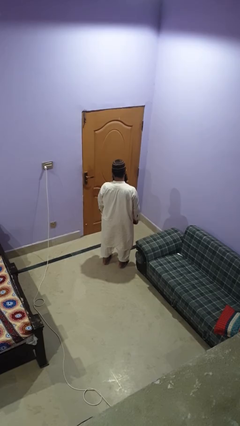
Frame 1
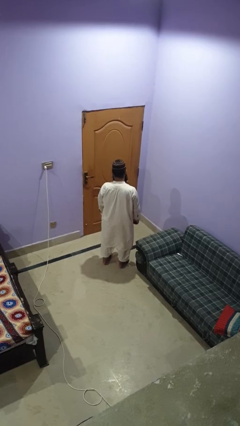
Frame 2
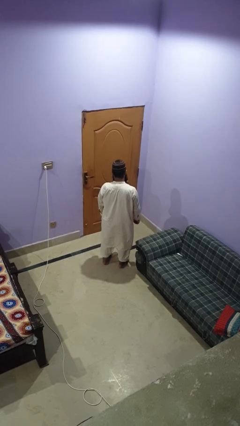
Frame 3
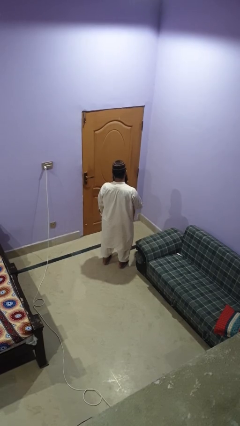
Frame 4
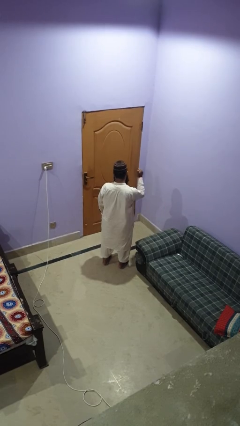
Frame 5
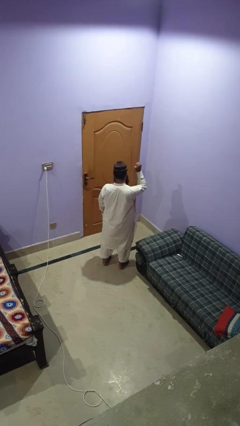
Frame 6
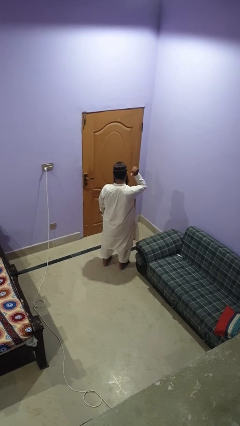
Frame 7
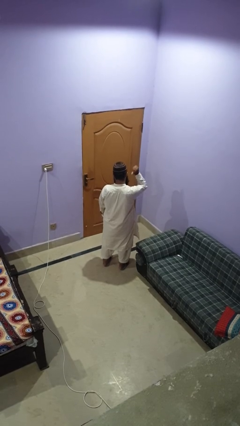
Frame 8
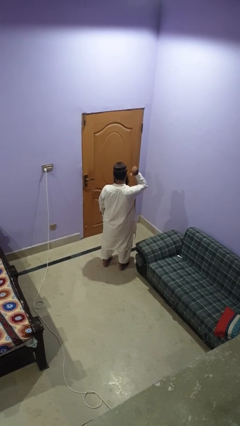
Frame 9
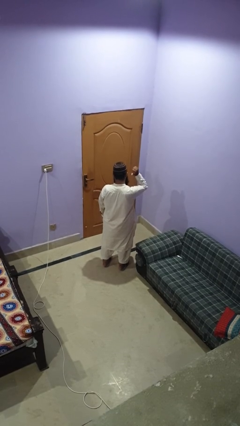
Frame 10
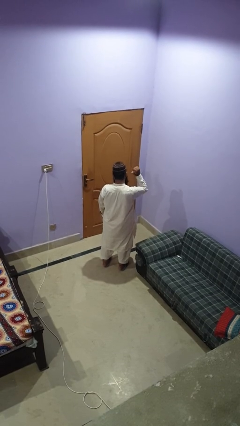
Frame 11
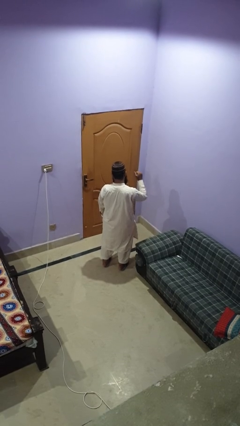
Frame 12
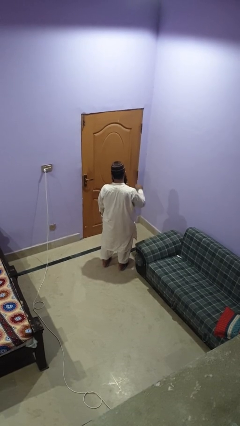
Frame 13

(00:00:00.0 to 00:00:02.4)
person gestures behind me

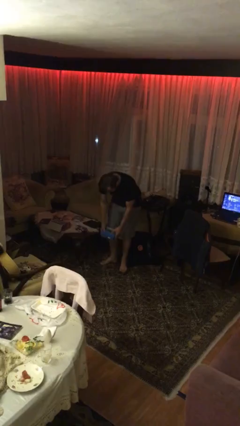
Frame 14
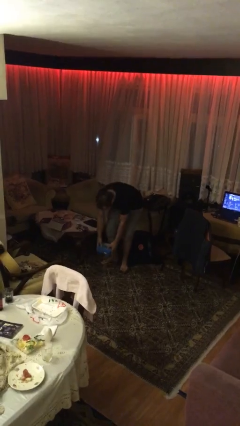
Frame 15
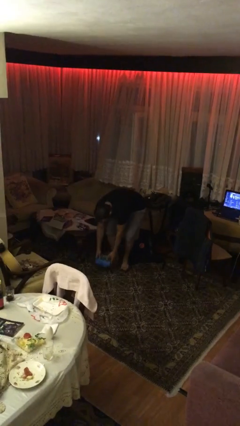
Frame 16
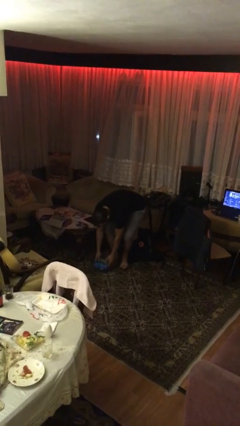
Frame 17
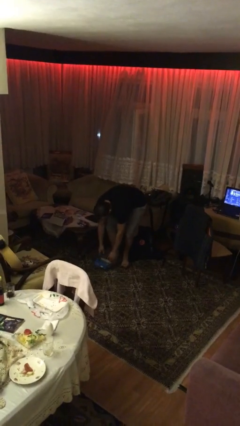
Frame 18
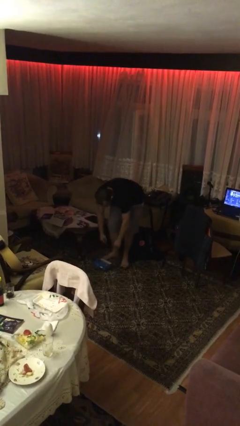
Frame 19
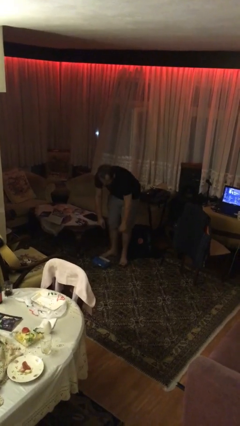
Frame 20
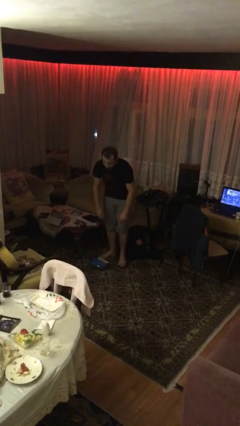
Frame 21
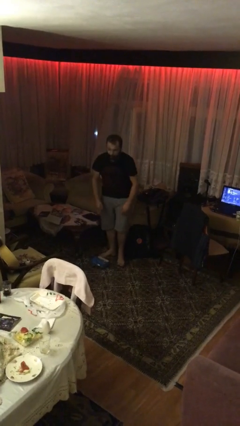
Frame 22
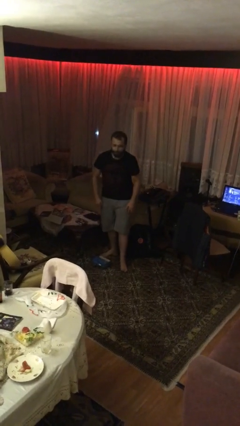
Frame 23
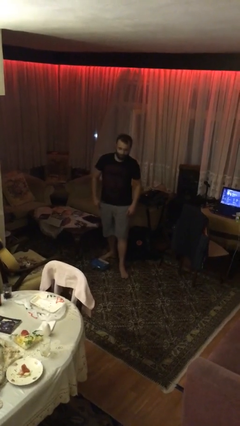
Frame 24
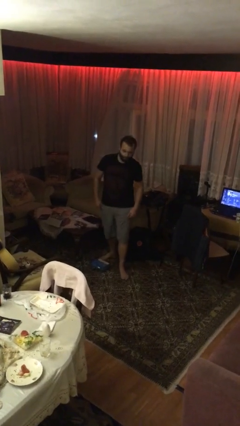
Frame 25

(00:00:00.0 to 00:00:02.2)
person puts down object on floor

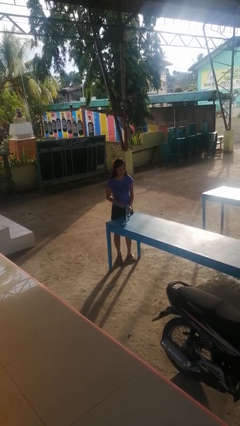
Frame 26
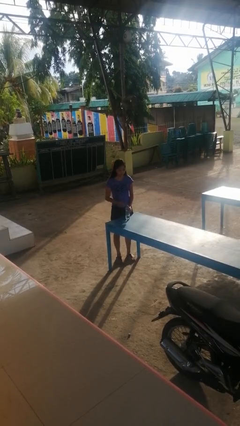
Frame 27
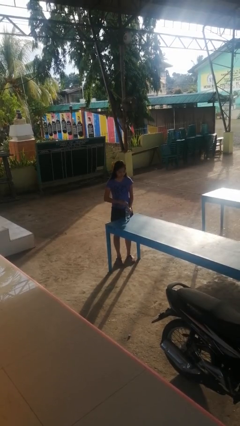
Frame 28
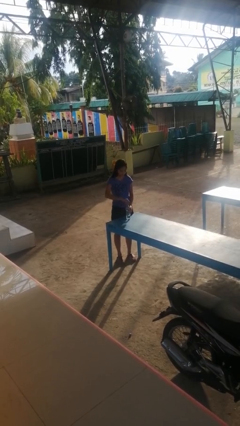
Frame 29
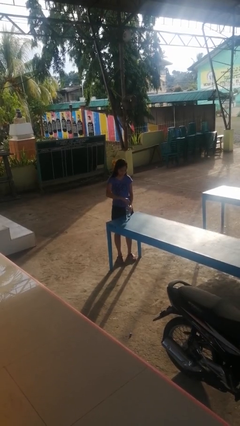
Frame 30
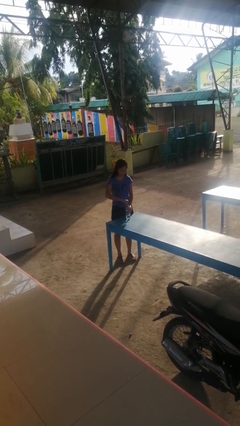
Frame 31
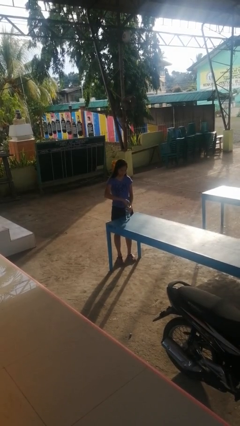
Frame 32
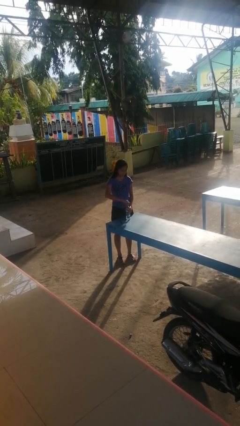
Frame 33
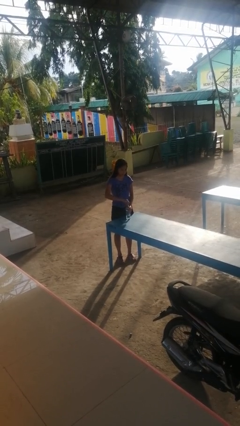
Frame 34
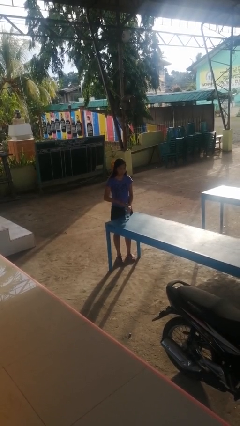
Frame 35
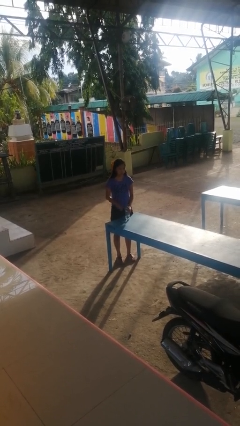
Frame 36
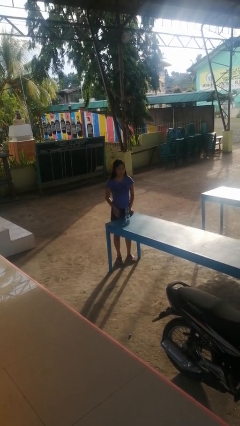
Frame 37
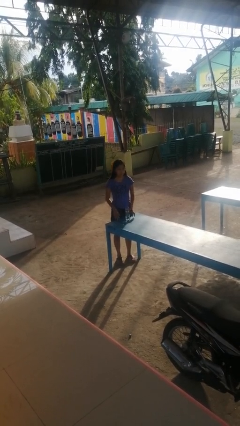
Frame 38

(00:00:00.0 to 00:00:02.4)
person screws lid to bottle

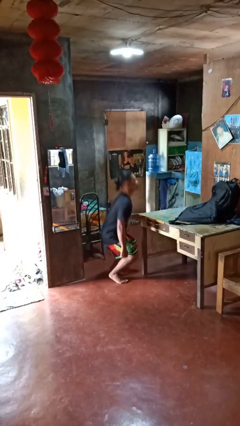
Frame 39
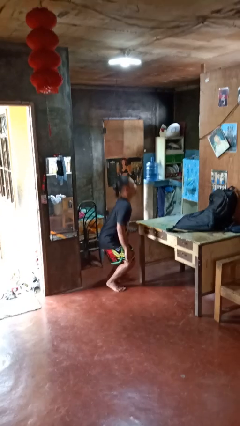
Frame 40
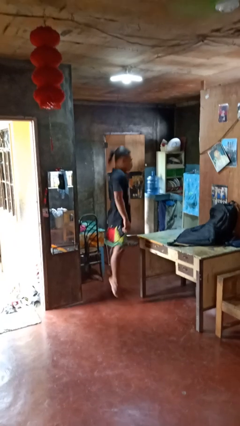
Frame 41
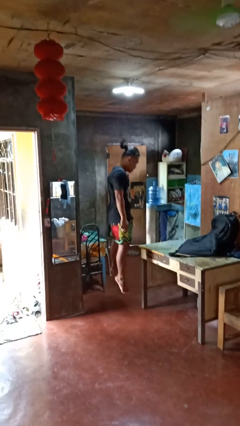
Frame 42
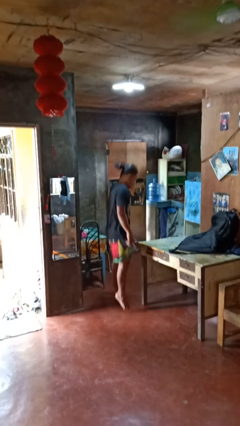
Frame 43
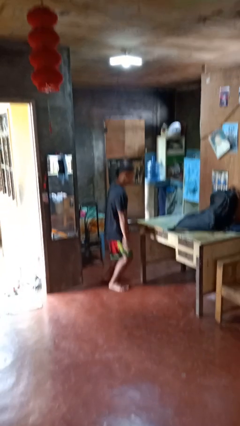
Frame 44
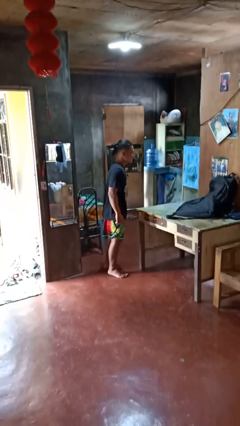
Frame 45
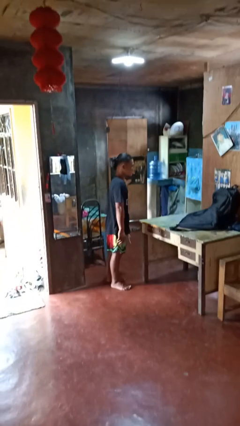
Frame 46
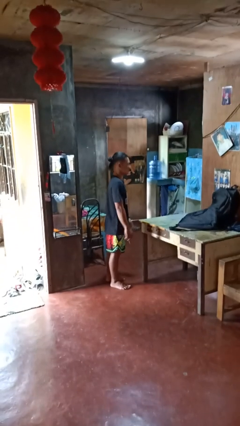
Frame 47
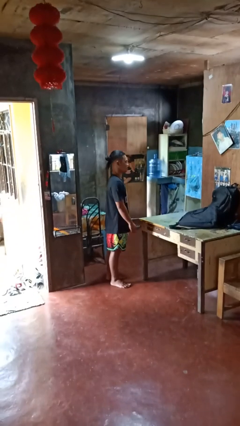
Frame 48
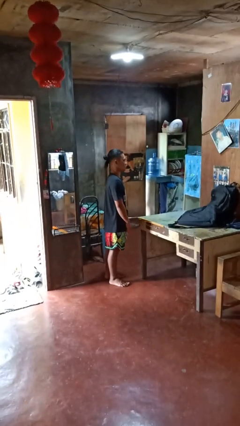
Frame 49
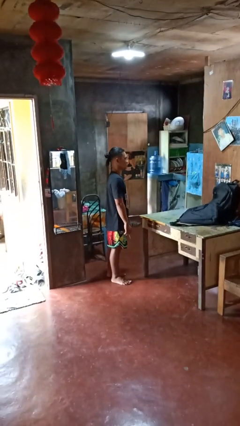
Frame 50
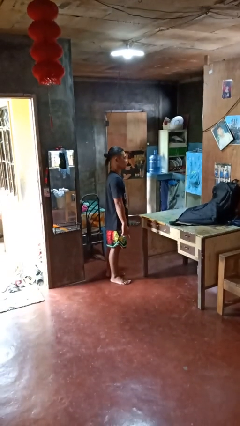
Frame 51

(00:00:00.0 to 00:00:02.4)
person jumps

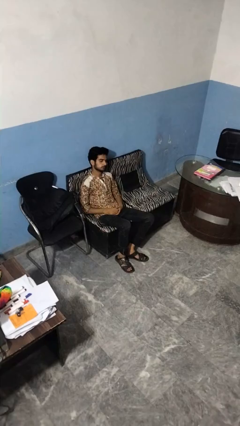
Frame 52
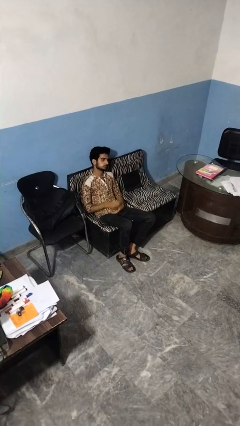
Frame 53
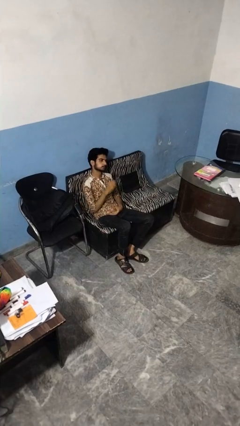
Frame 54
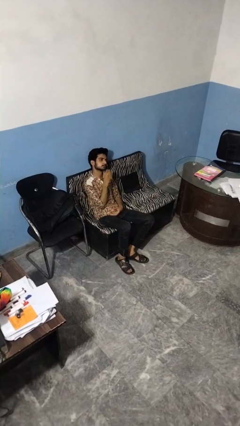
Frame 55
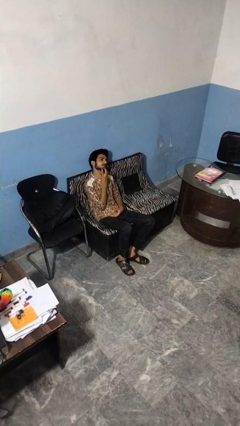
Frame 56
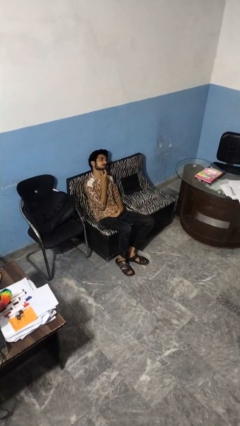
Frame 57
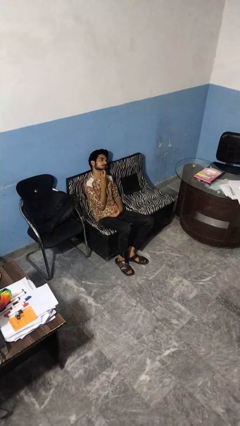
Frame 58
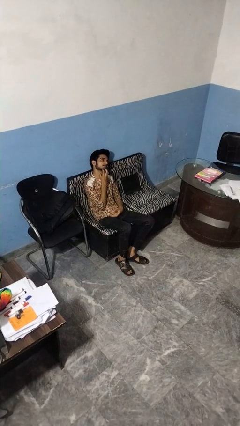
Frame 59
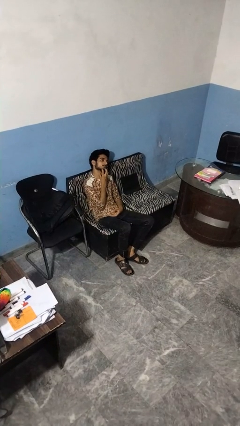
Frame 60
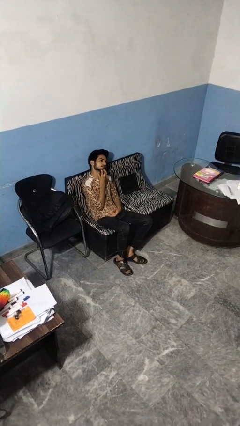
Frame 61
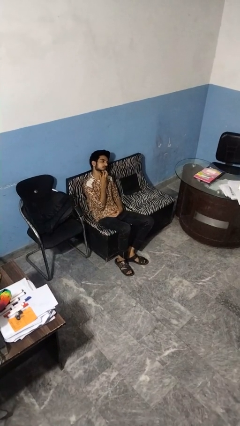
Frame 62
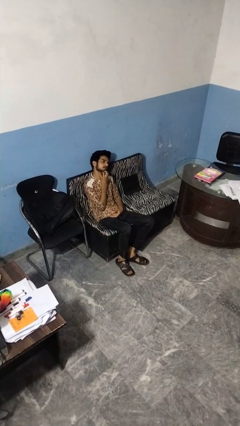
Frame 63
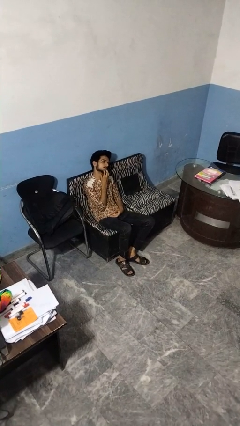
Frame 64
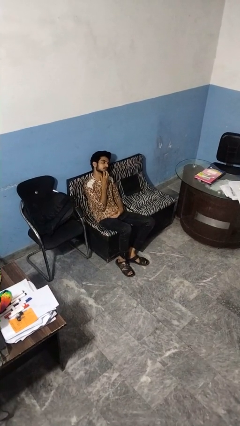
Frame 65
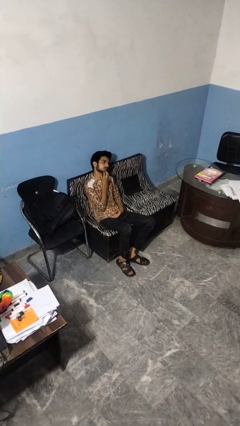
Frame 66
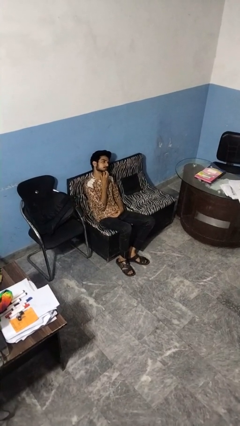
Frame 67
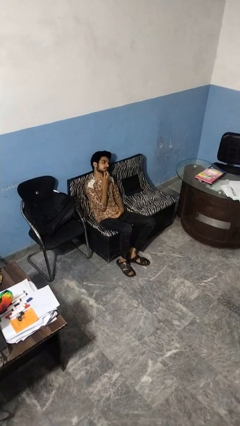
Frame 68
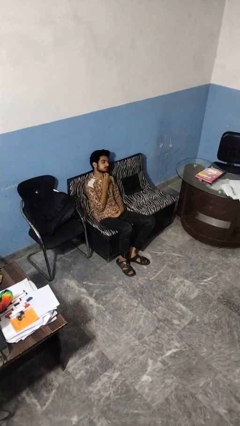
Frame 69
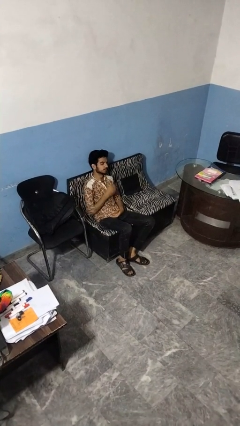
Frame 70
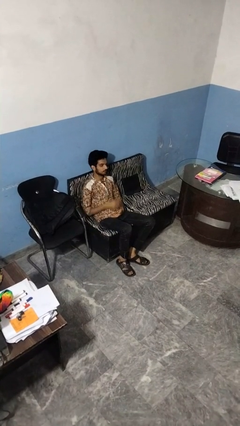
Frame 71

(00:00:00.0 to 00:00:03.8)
person strokes chin

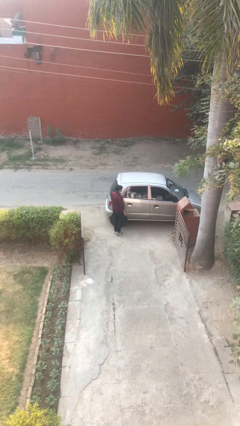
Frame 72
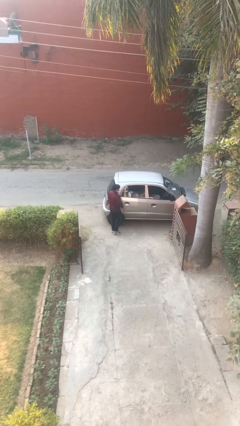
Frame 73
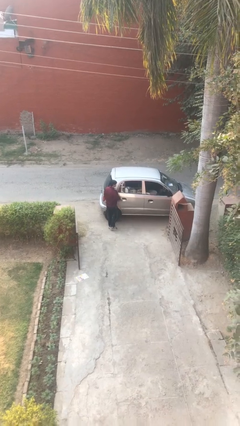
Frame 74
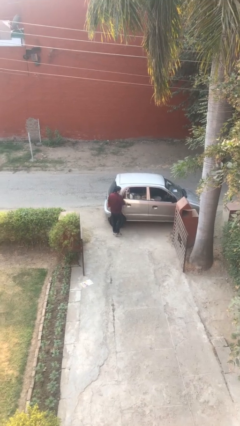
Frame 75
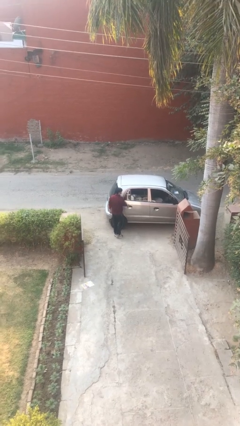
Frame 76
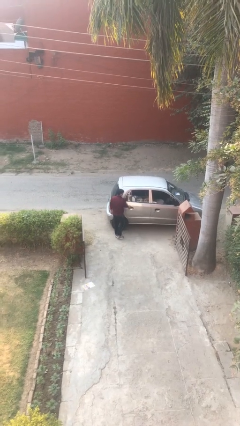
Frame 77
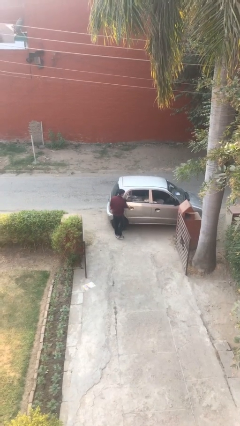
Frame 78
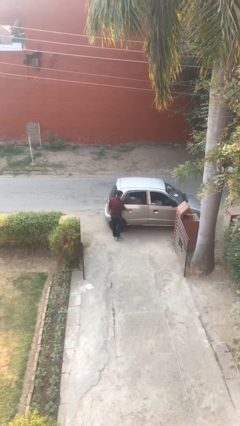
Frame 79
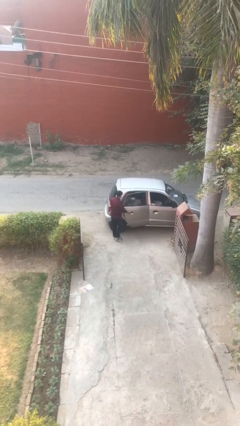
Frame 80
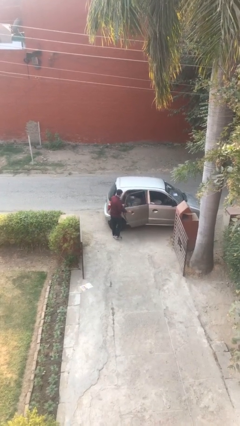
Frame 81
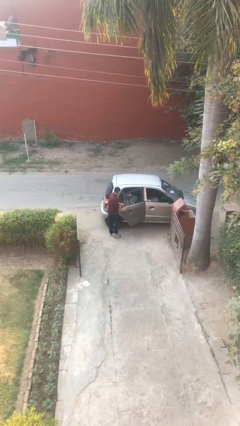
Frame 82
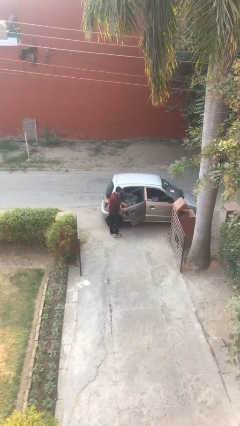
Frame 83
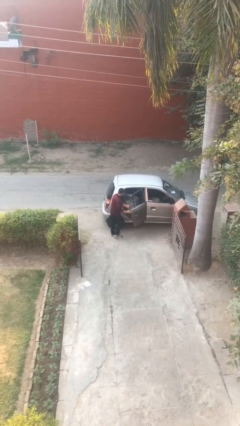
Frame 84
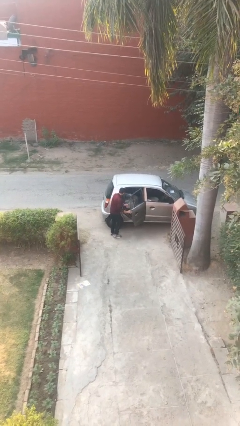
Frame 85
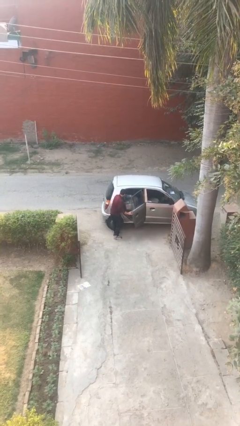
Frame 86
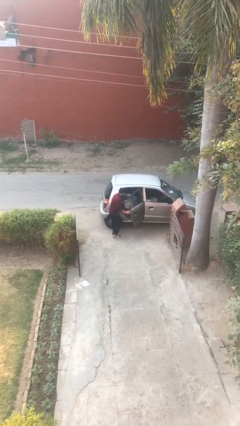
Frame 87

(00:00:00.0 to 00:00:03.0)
person opens car door

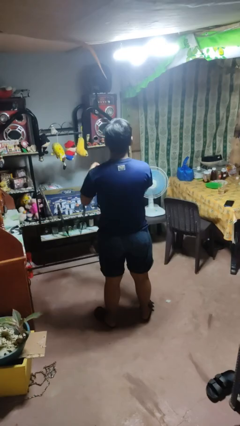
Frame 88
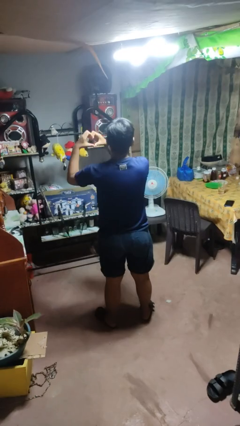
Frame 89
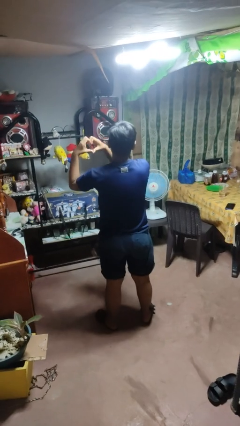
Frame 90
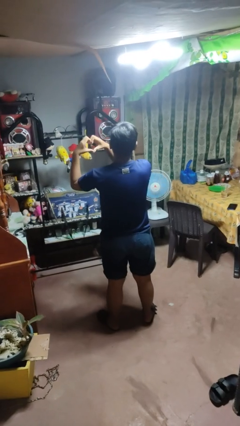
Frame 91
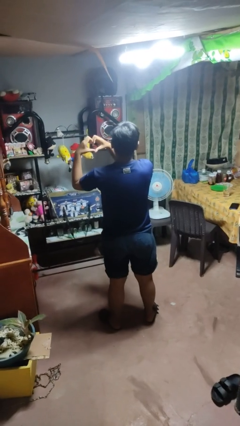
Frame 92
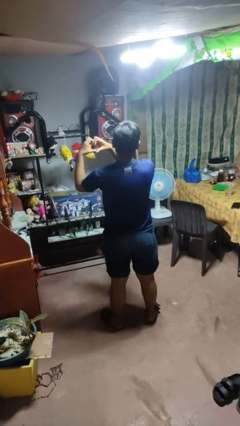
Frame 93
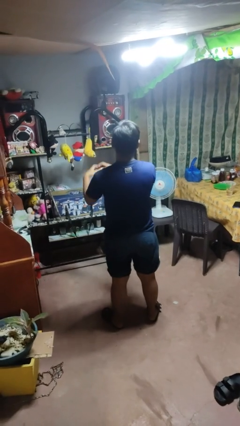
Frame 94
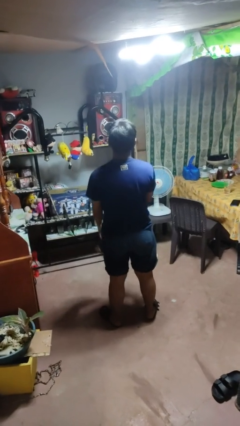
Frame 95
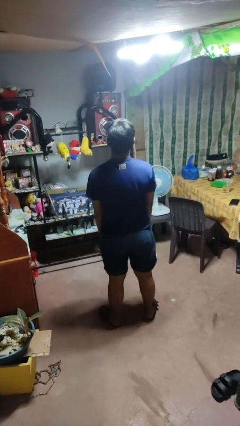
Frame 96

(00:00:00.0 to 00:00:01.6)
person gestures heart
